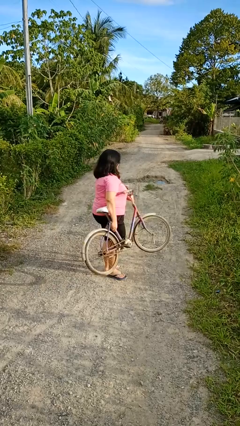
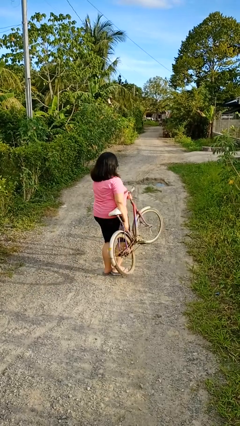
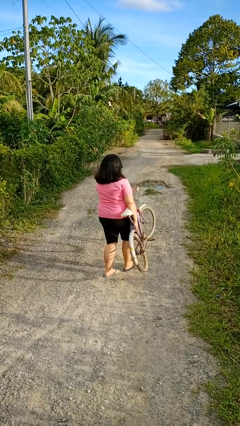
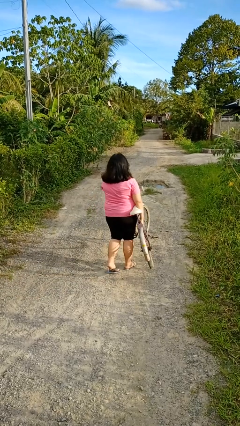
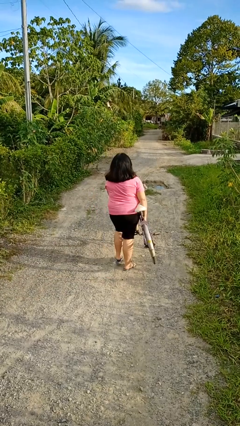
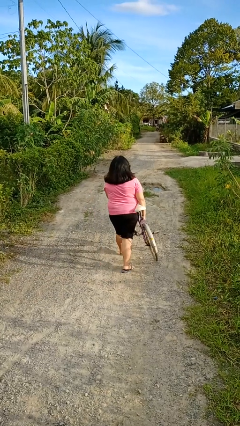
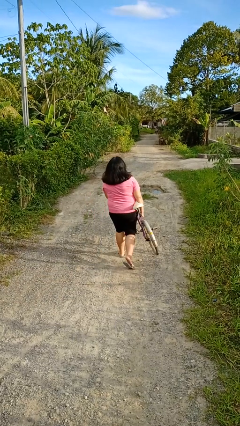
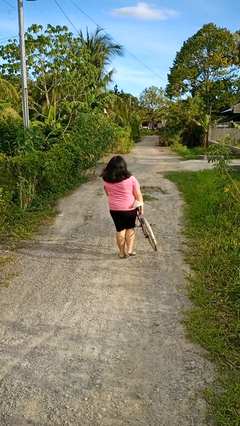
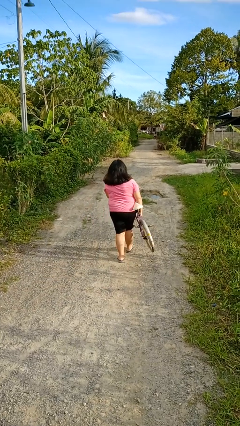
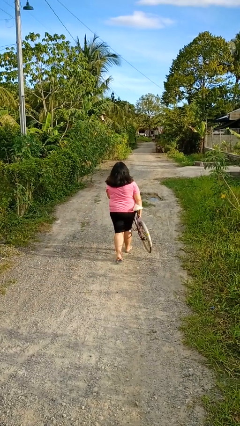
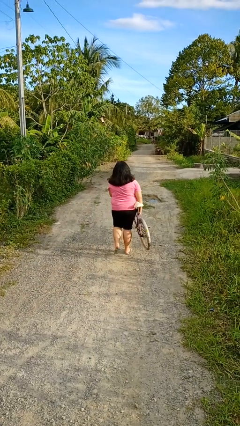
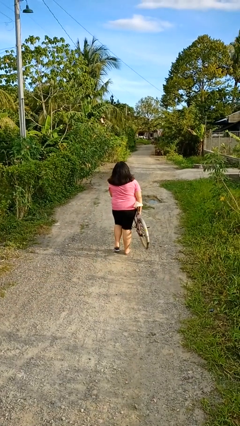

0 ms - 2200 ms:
person carries bicycle

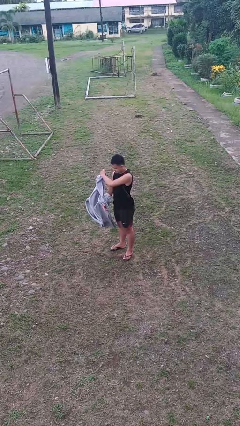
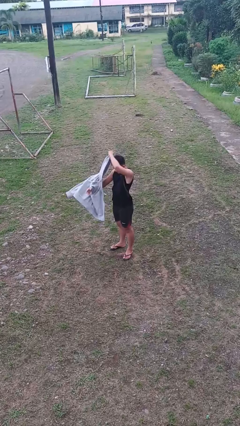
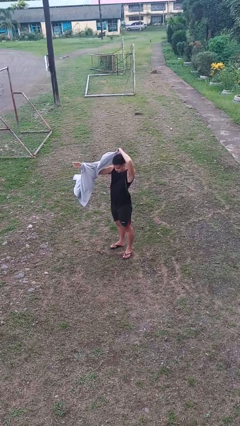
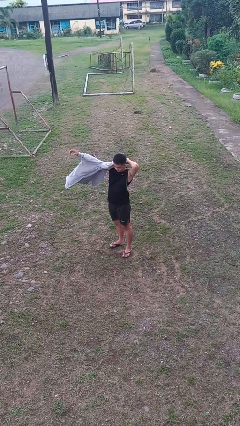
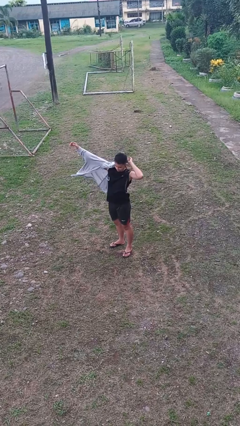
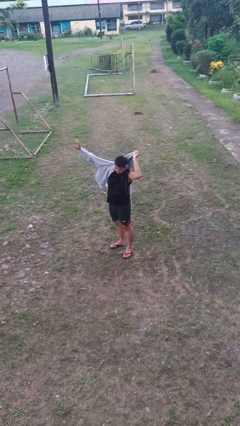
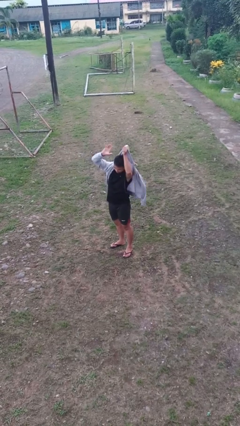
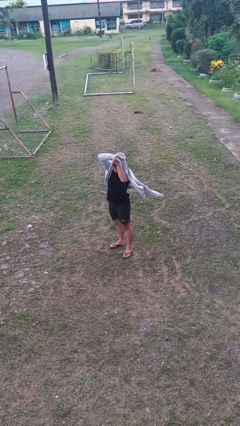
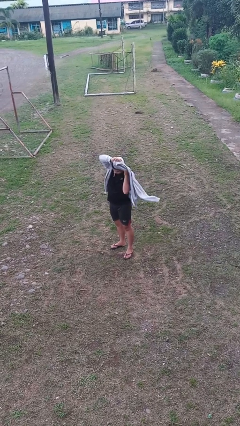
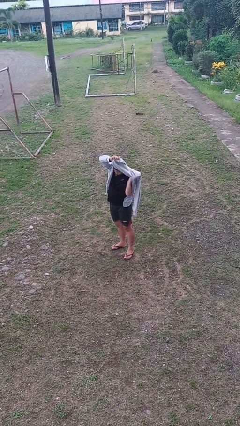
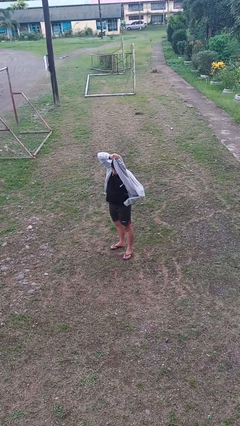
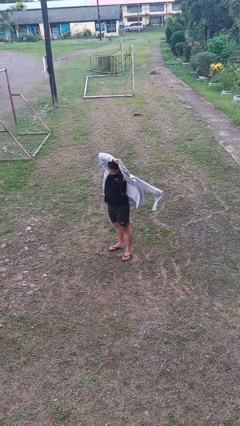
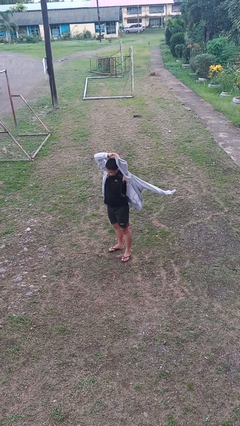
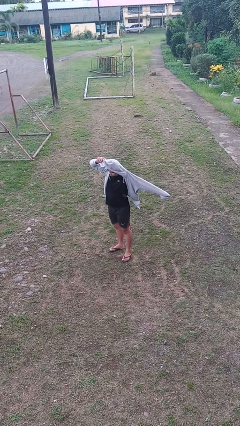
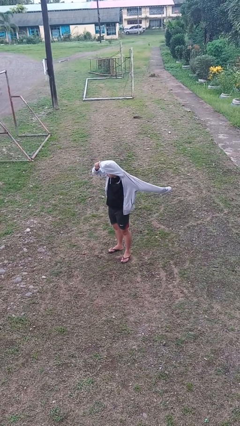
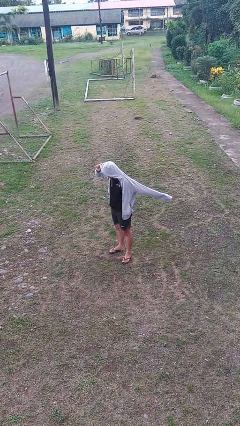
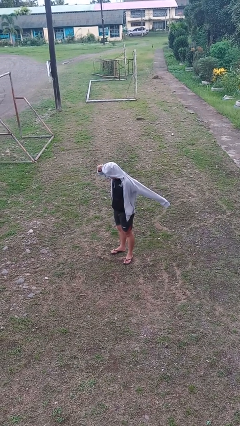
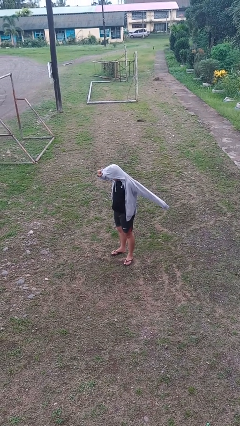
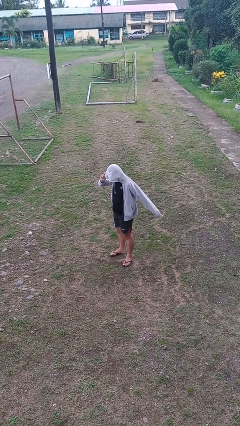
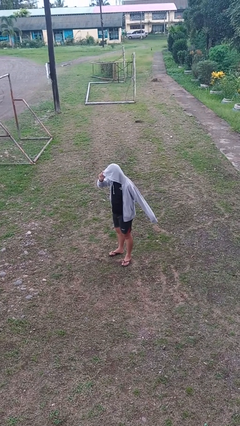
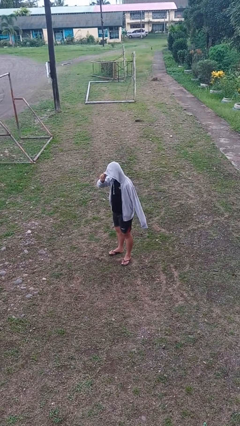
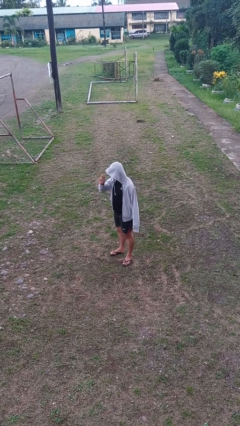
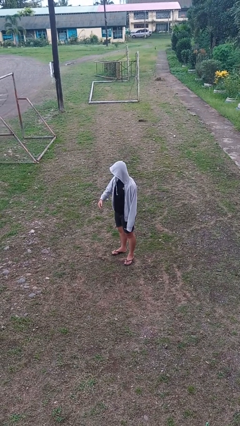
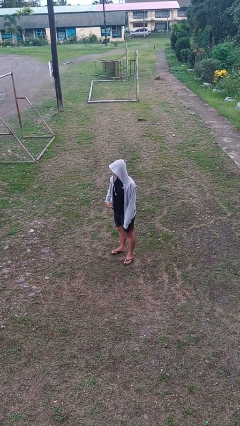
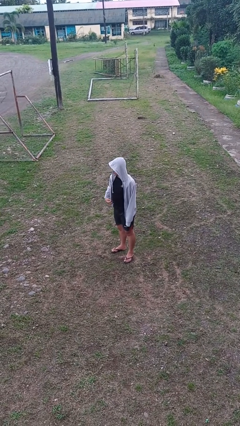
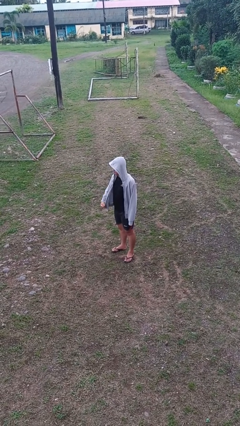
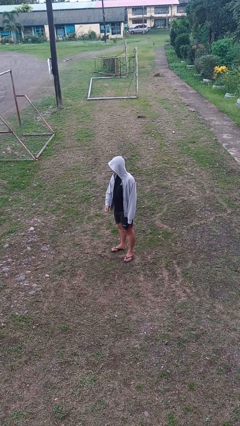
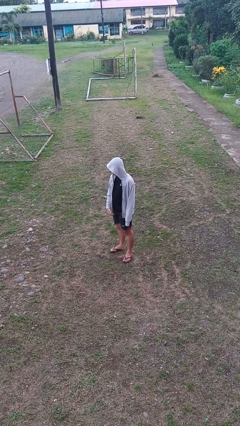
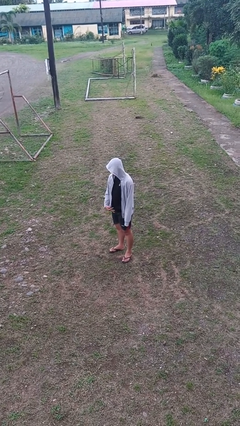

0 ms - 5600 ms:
person puts on hoodie

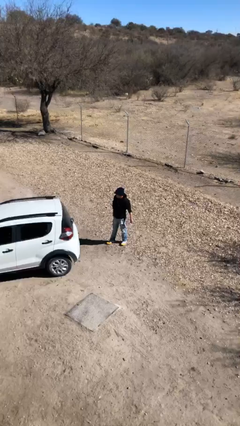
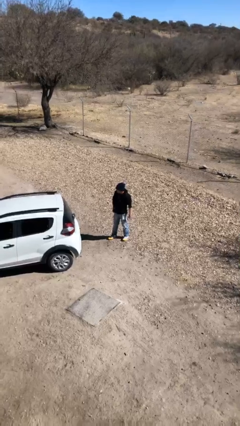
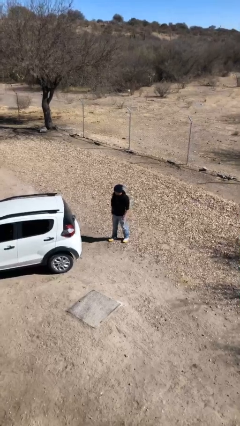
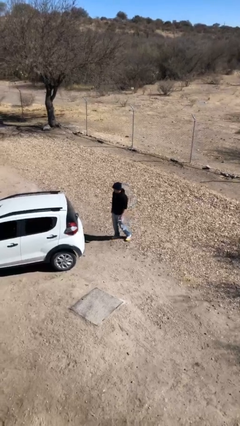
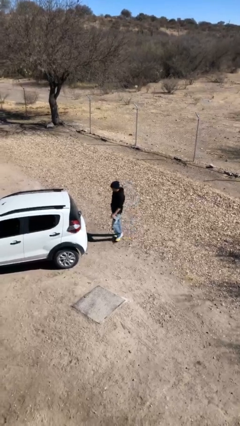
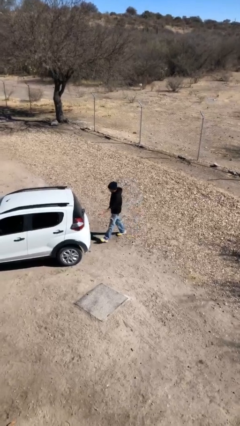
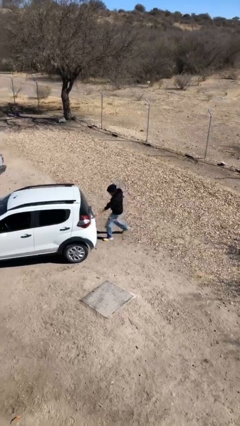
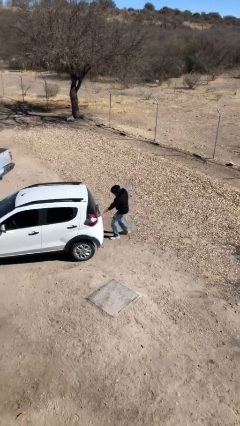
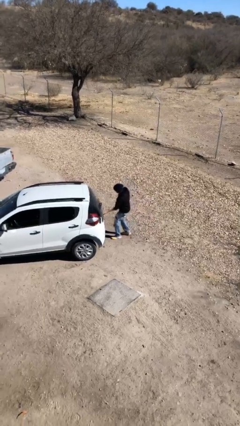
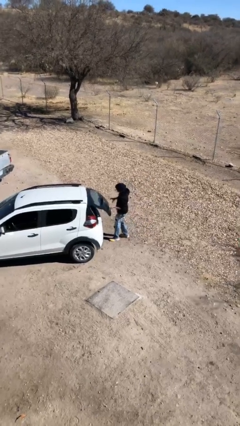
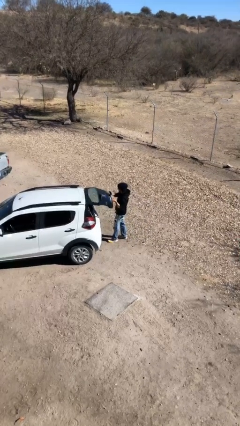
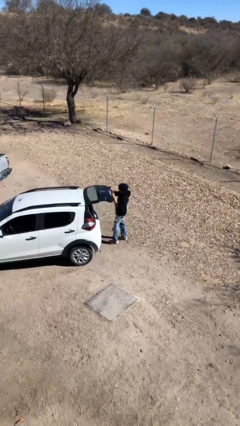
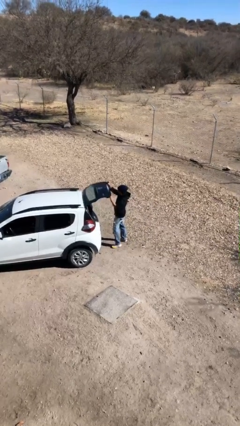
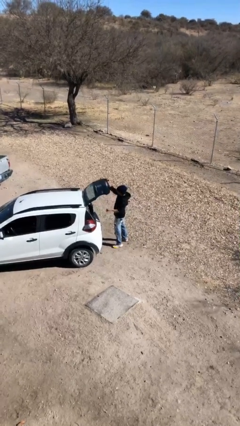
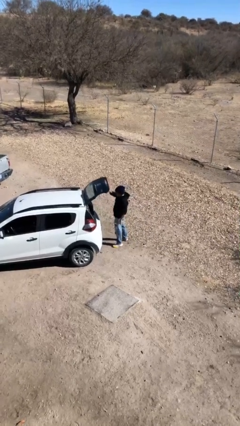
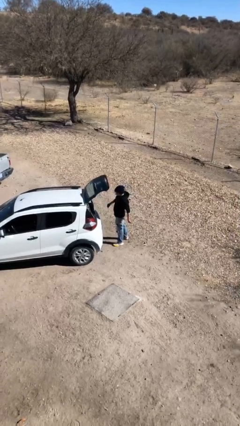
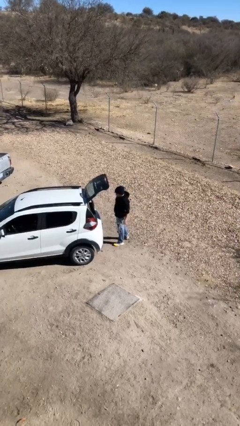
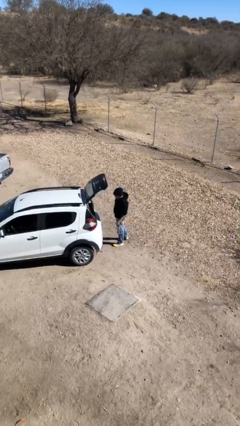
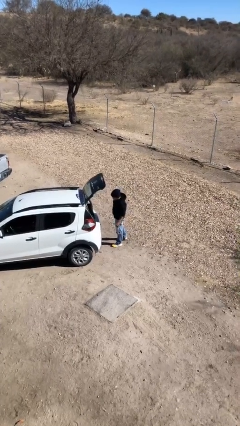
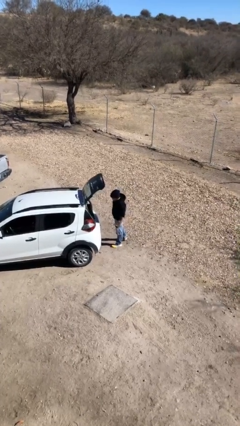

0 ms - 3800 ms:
person opens car trunk

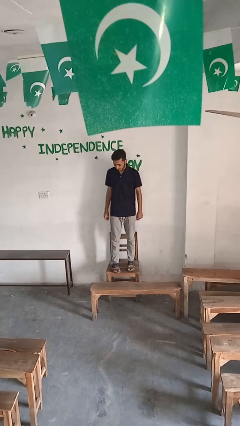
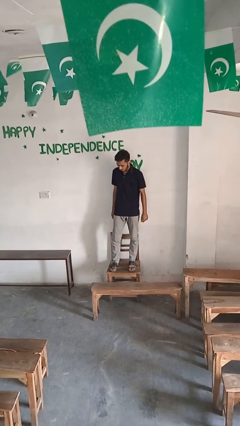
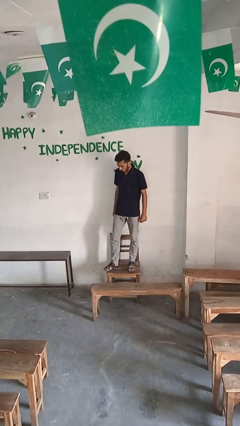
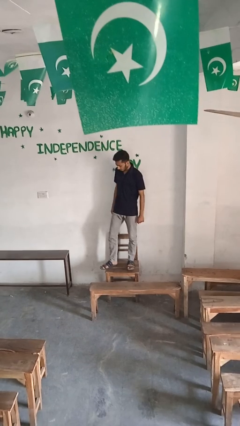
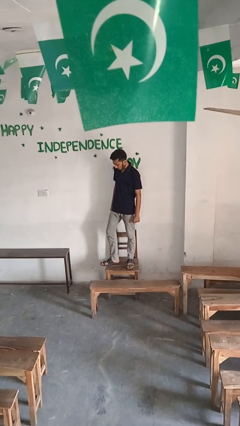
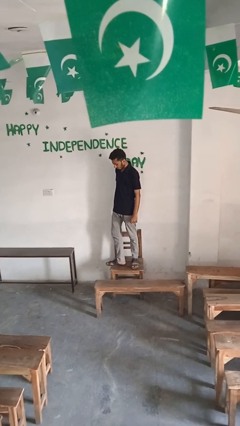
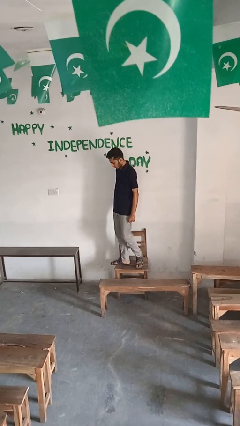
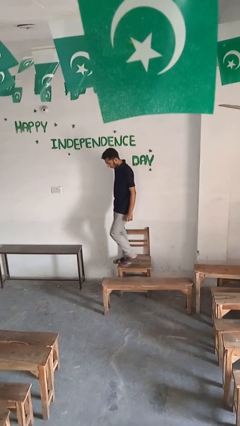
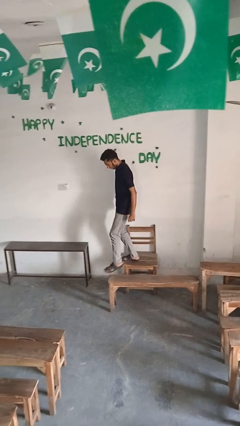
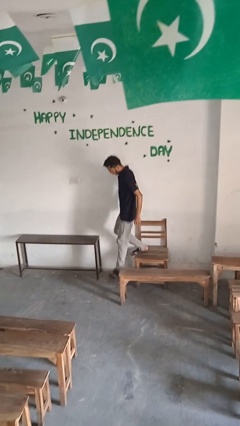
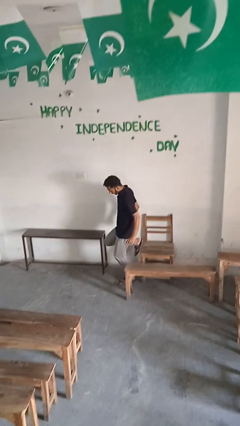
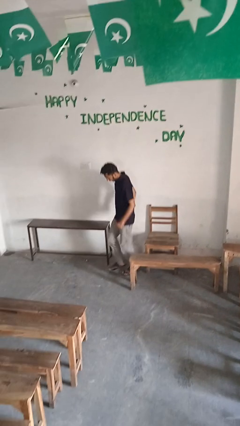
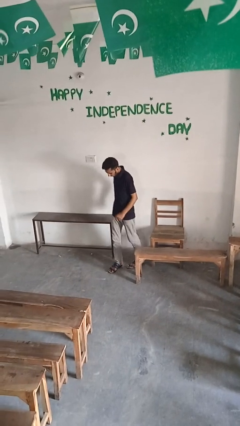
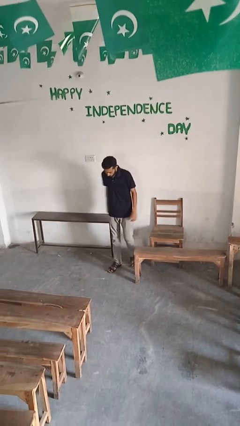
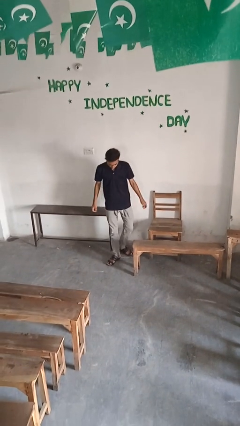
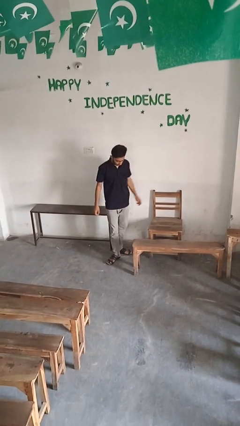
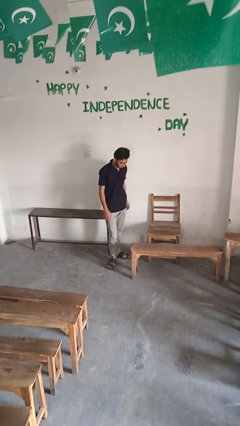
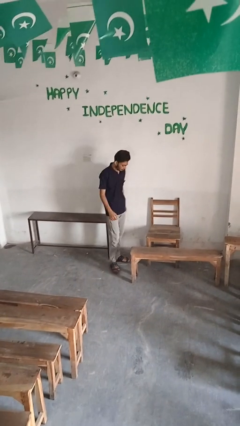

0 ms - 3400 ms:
person climbs off chair

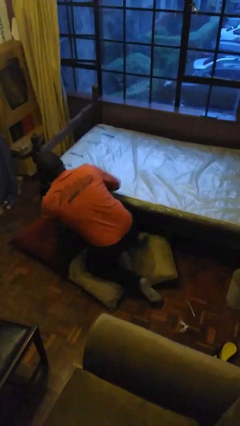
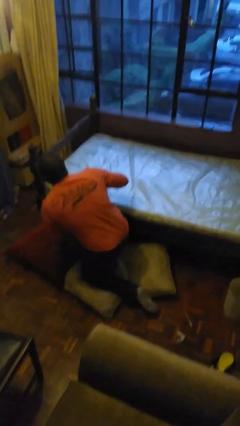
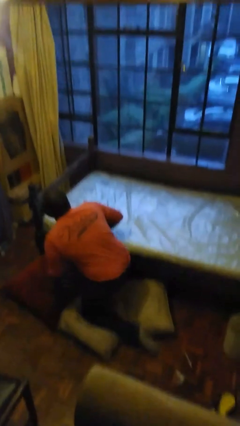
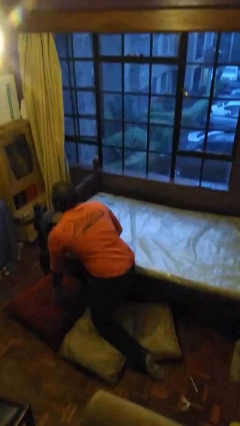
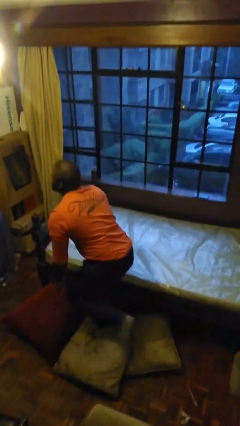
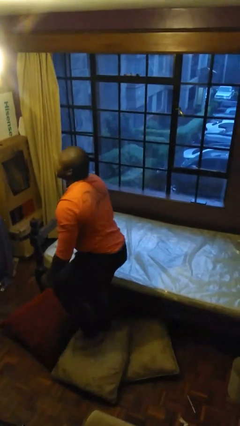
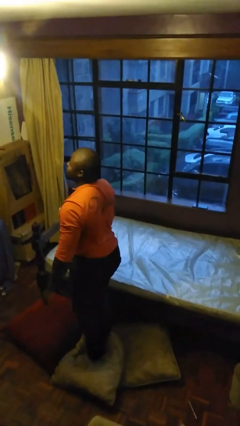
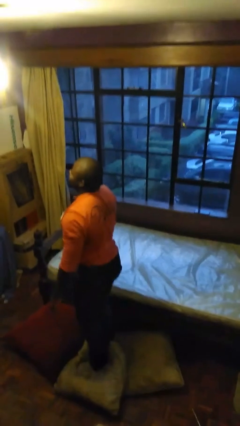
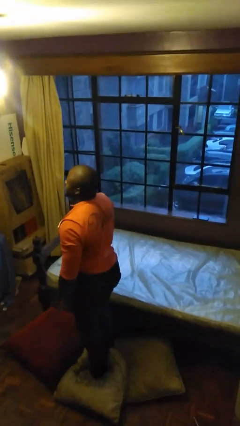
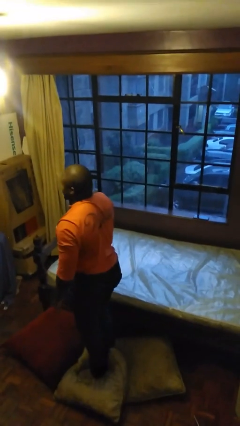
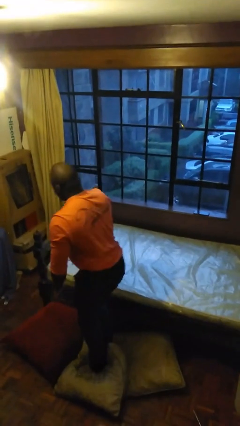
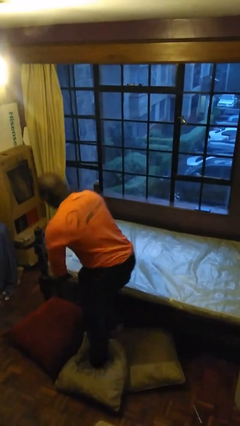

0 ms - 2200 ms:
person stands up from floor

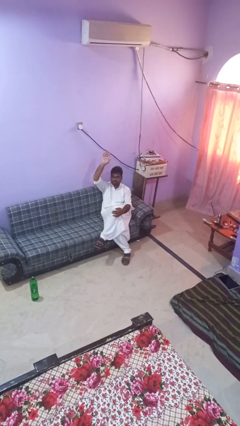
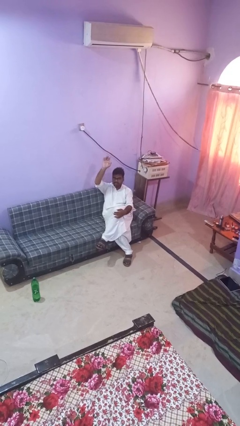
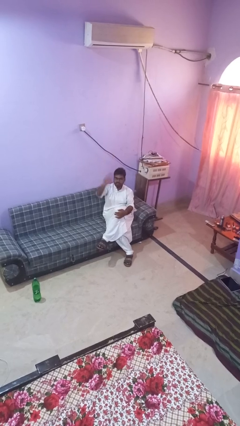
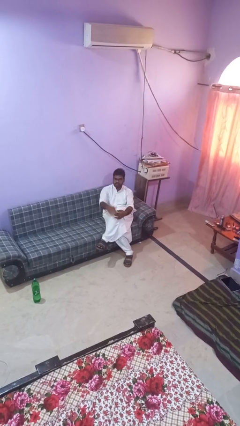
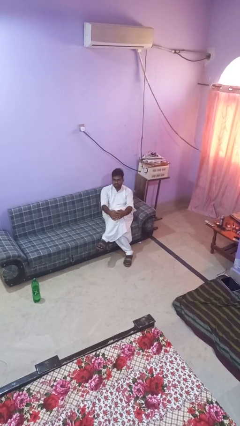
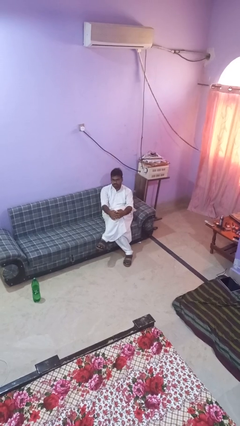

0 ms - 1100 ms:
person gestures lower hand
